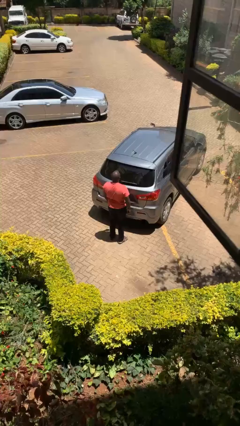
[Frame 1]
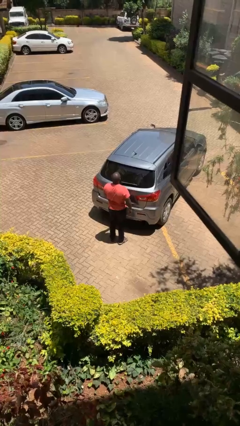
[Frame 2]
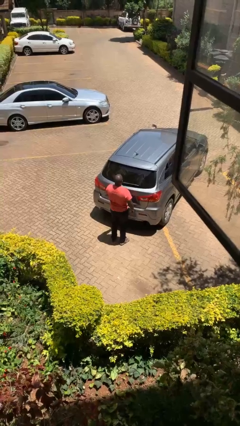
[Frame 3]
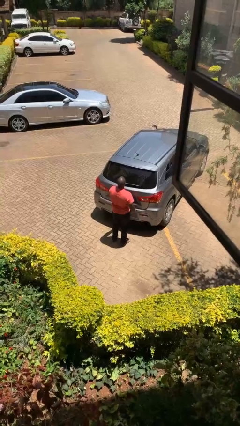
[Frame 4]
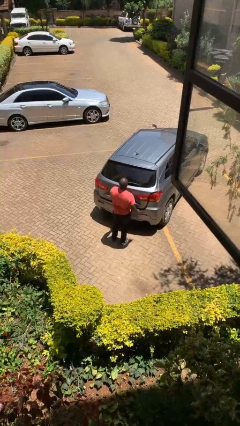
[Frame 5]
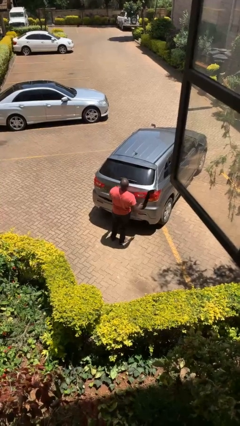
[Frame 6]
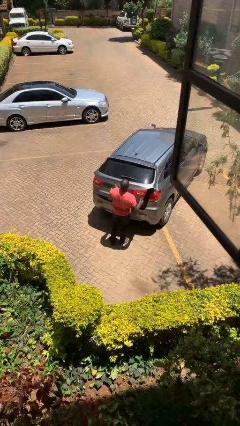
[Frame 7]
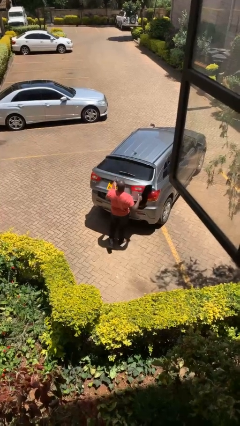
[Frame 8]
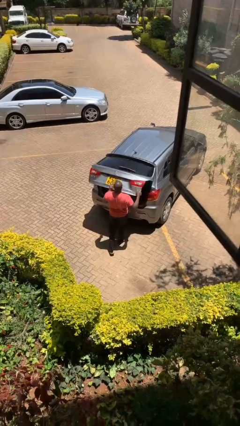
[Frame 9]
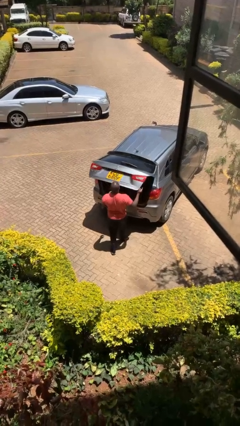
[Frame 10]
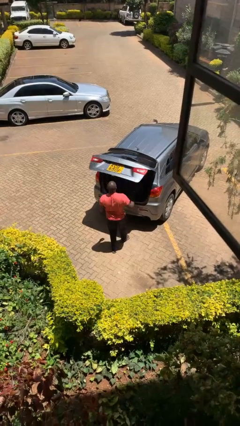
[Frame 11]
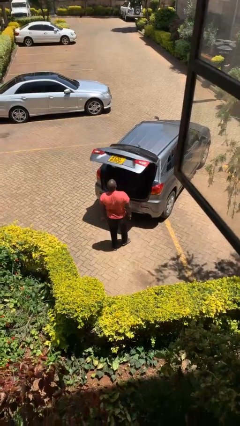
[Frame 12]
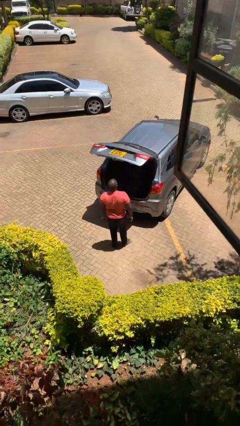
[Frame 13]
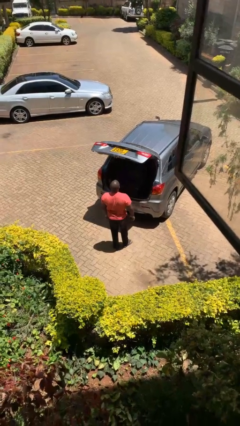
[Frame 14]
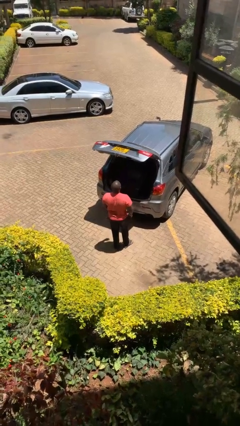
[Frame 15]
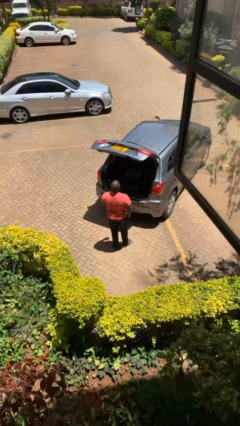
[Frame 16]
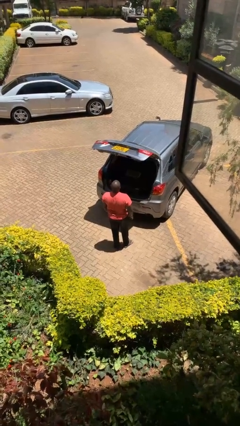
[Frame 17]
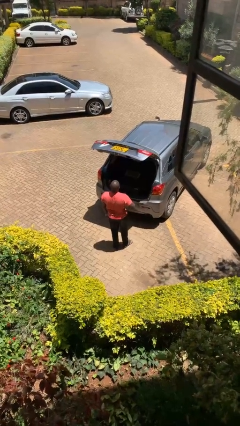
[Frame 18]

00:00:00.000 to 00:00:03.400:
person opens car trunk

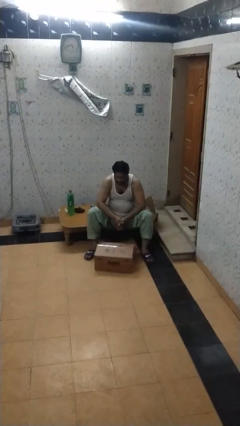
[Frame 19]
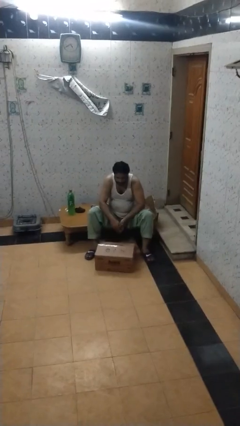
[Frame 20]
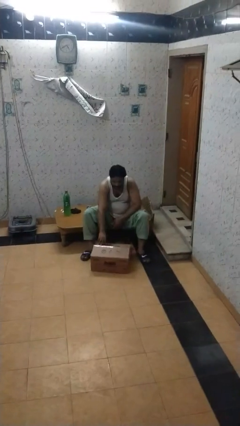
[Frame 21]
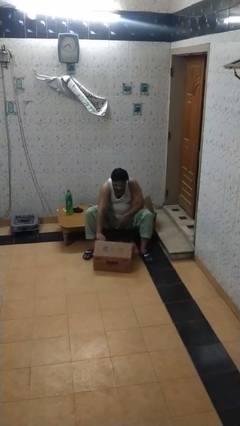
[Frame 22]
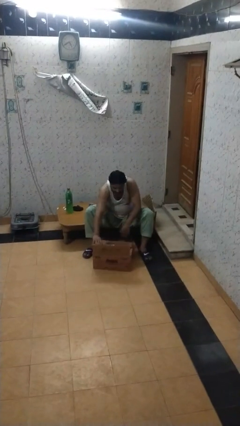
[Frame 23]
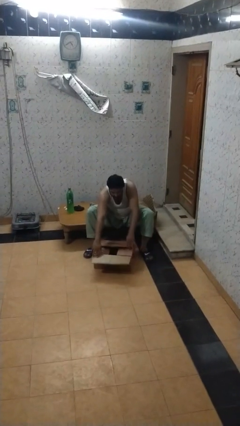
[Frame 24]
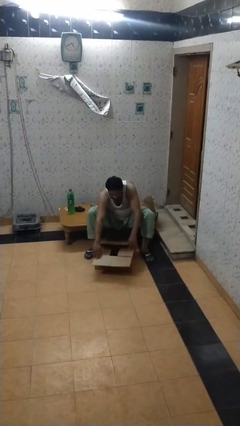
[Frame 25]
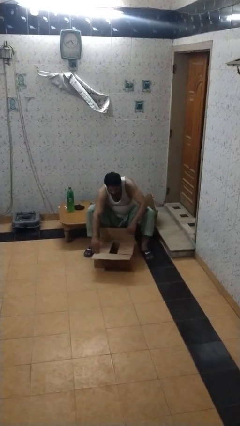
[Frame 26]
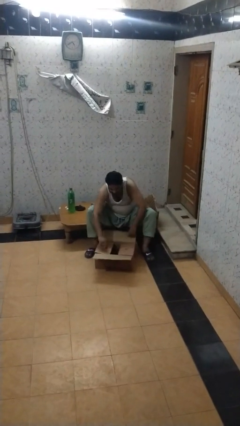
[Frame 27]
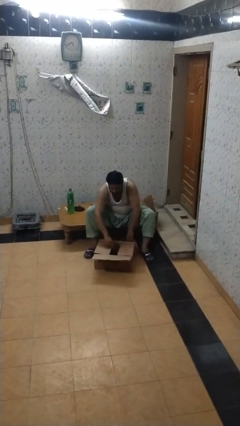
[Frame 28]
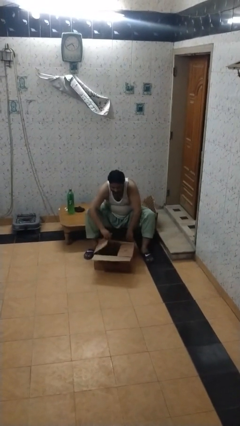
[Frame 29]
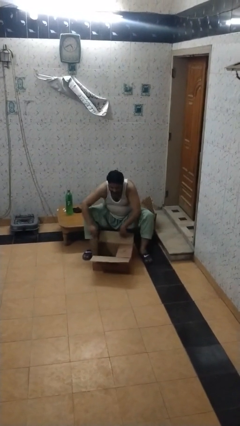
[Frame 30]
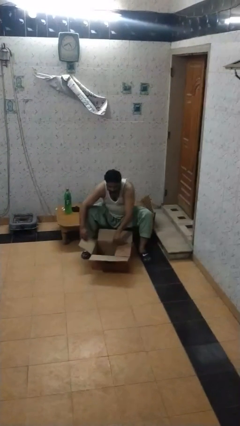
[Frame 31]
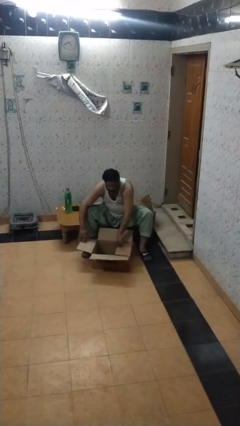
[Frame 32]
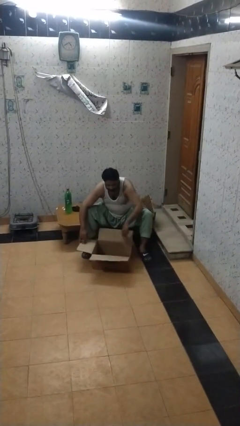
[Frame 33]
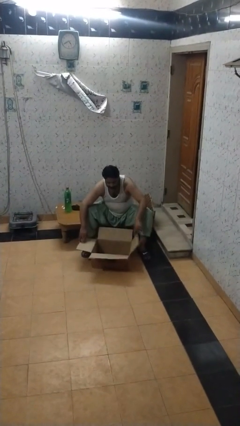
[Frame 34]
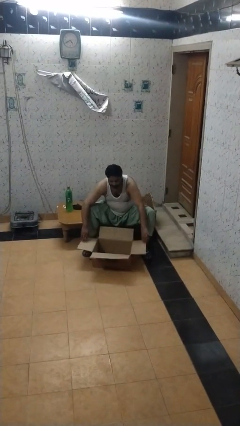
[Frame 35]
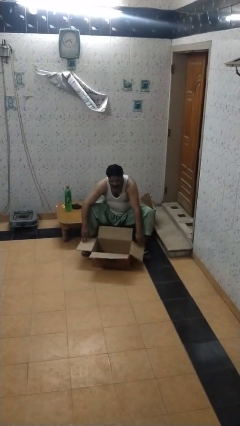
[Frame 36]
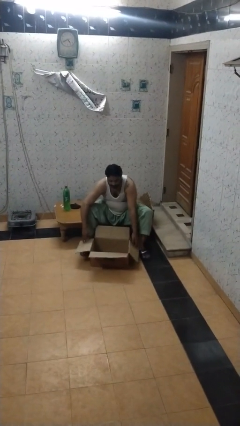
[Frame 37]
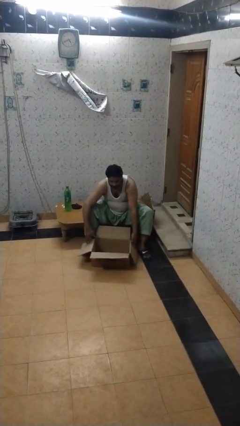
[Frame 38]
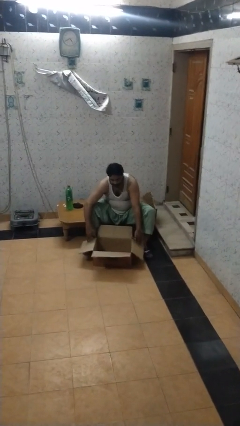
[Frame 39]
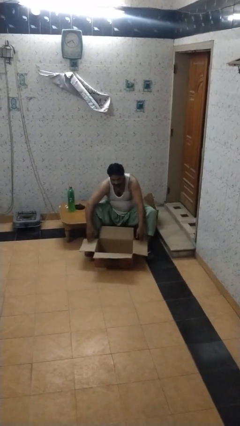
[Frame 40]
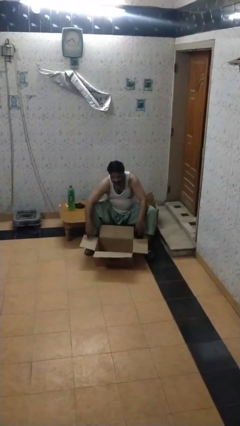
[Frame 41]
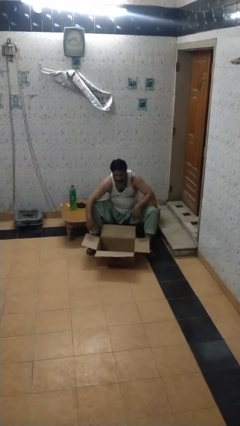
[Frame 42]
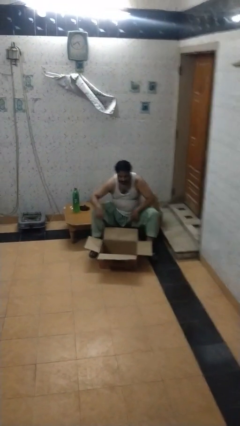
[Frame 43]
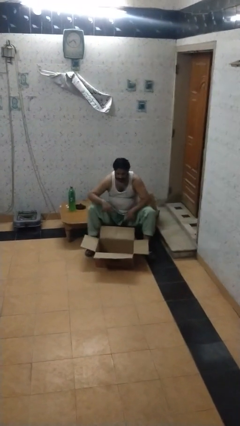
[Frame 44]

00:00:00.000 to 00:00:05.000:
person opens box

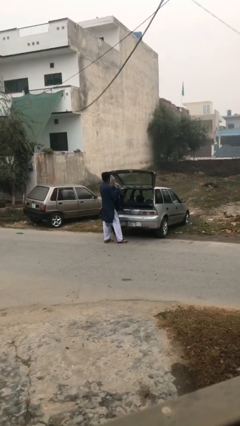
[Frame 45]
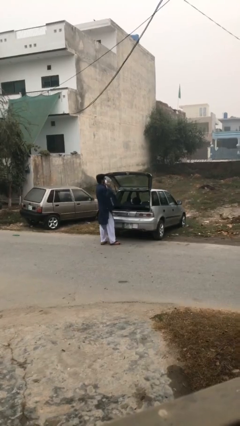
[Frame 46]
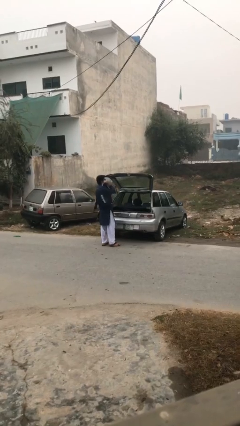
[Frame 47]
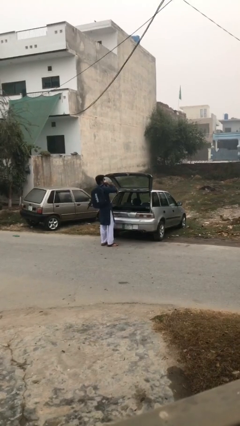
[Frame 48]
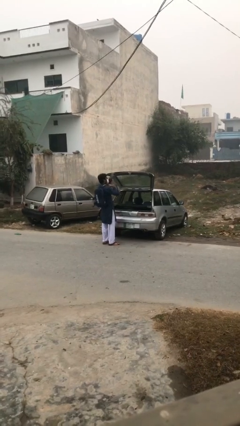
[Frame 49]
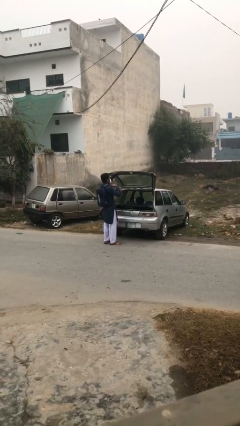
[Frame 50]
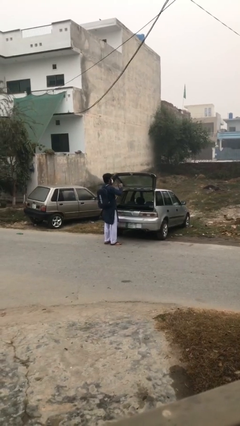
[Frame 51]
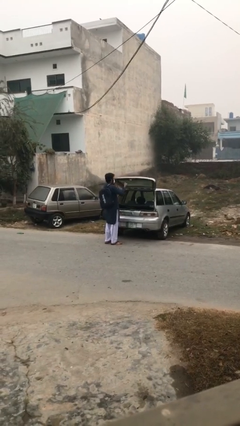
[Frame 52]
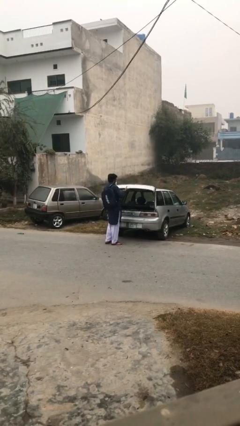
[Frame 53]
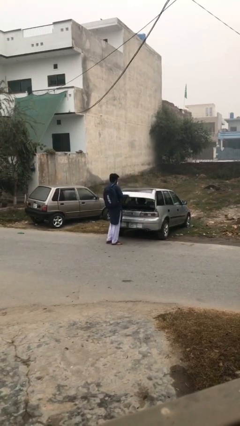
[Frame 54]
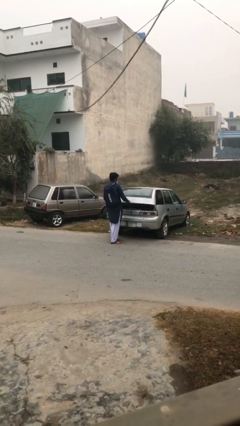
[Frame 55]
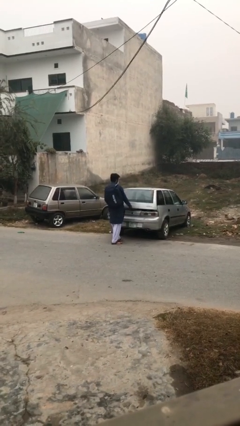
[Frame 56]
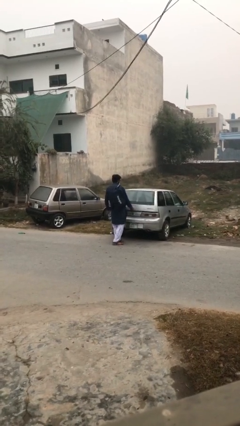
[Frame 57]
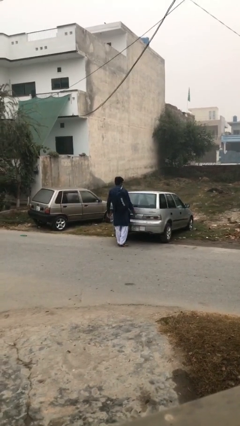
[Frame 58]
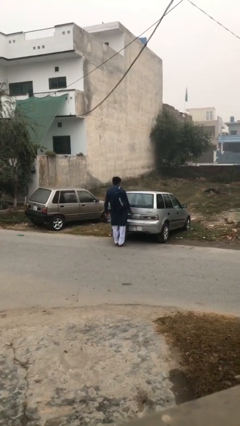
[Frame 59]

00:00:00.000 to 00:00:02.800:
person closes car trunk

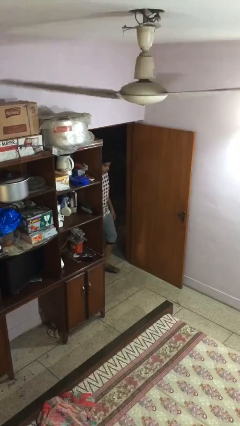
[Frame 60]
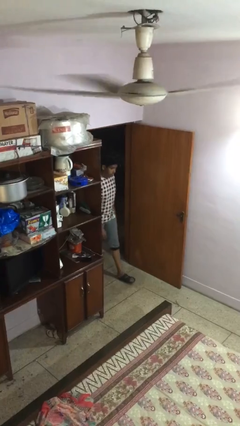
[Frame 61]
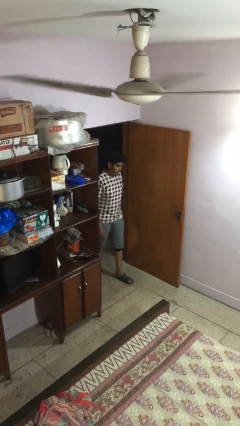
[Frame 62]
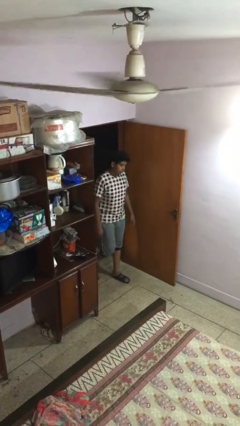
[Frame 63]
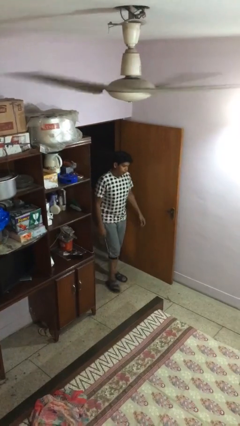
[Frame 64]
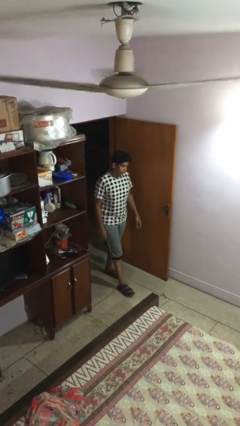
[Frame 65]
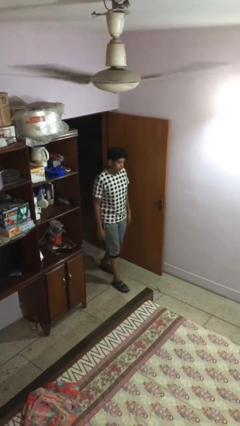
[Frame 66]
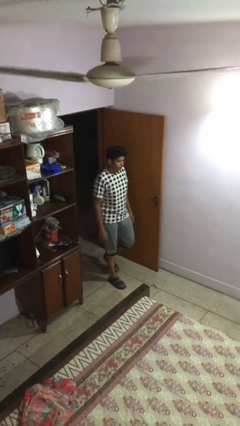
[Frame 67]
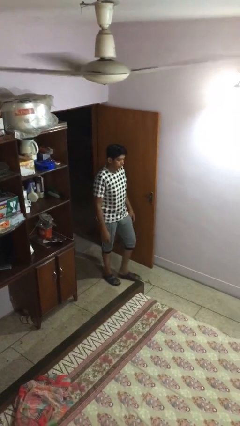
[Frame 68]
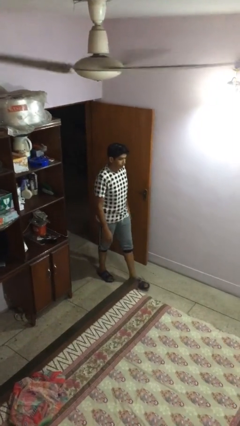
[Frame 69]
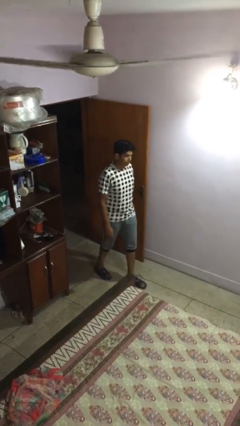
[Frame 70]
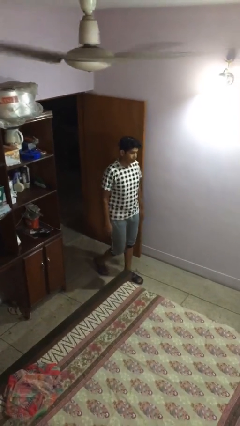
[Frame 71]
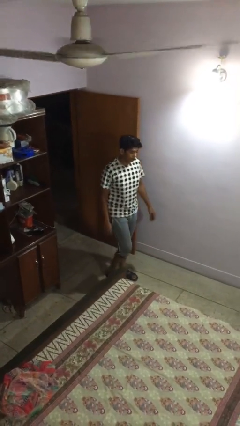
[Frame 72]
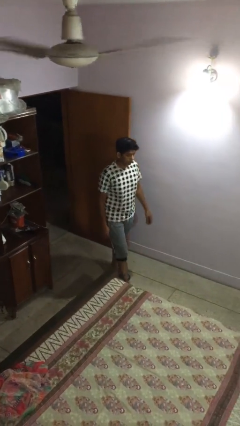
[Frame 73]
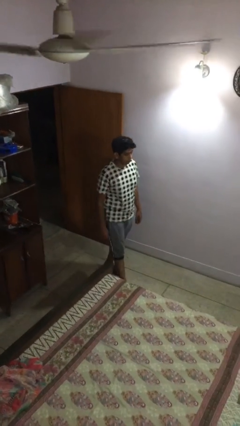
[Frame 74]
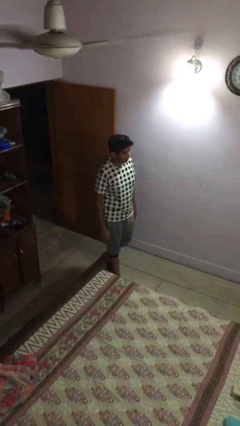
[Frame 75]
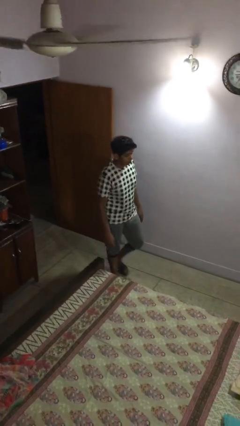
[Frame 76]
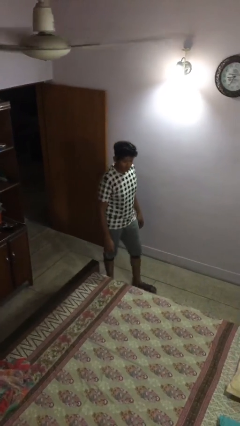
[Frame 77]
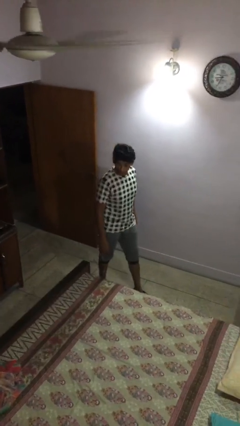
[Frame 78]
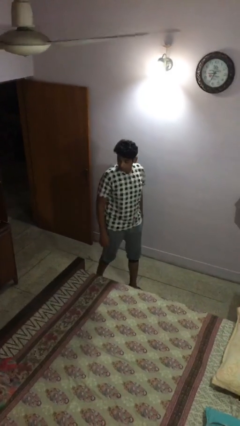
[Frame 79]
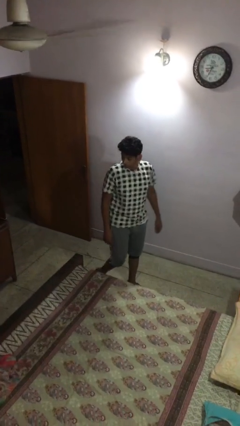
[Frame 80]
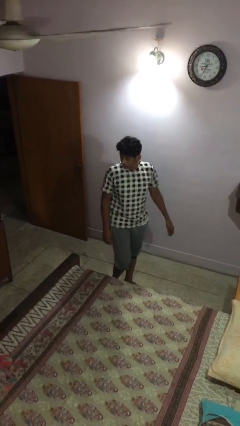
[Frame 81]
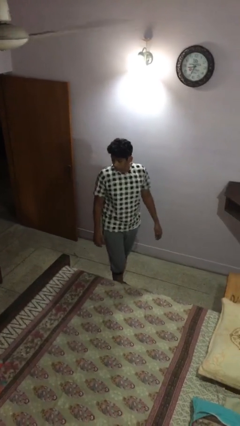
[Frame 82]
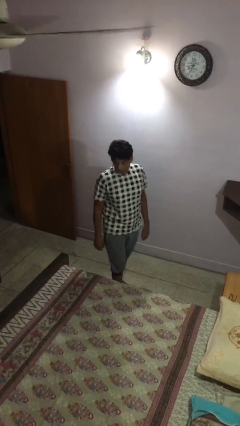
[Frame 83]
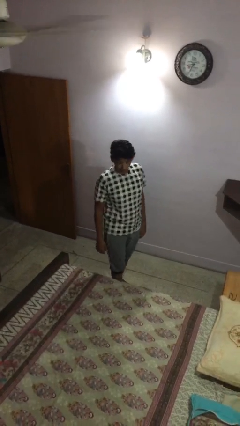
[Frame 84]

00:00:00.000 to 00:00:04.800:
person enters scene through structure

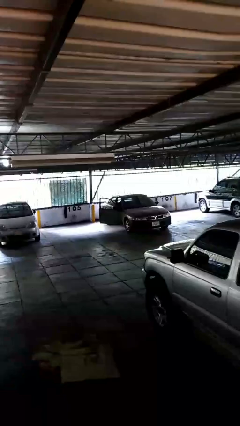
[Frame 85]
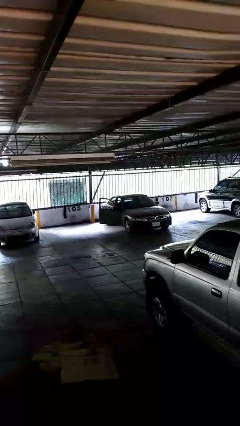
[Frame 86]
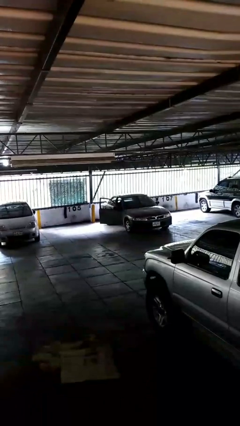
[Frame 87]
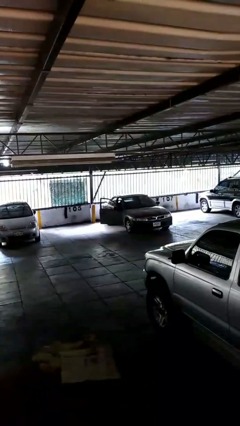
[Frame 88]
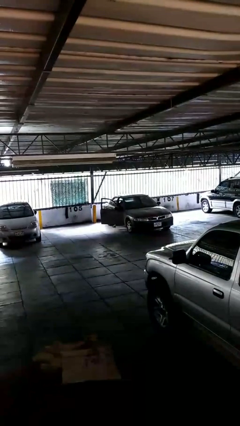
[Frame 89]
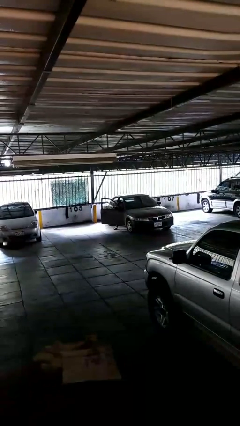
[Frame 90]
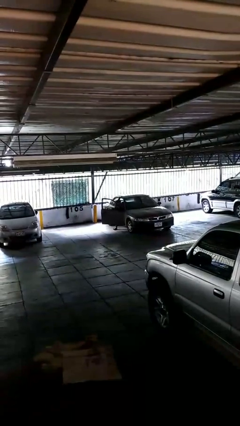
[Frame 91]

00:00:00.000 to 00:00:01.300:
person enters car

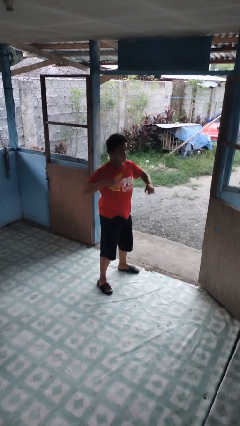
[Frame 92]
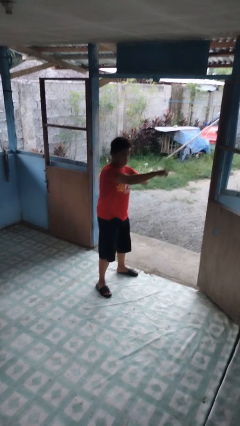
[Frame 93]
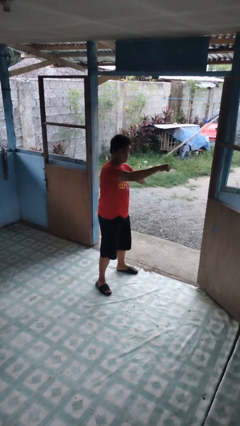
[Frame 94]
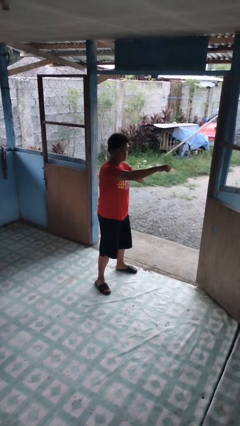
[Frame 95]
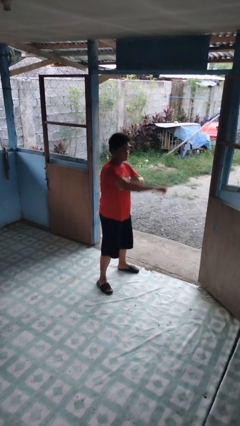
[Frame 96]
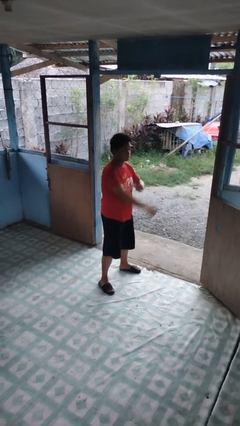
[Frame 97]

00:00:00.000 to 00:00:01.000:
person punches
